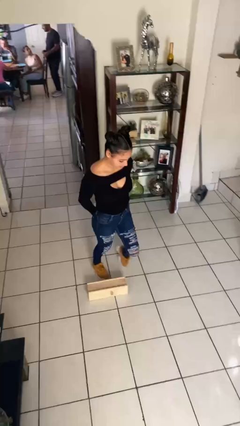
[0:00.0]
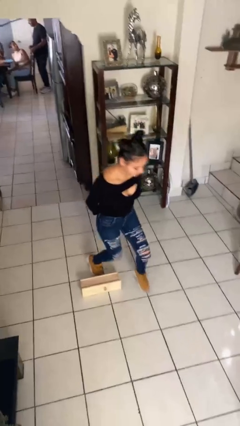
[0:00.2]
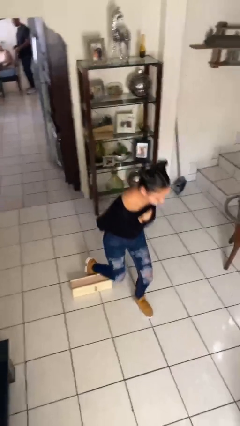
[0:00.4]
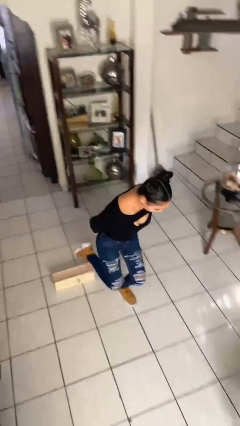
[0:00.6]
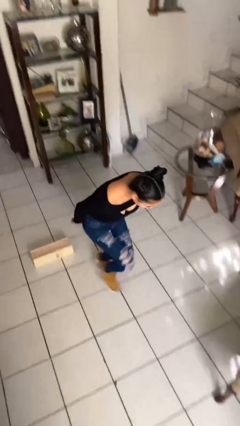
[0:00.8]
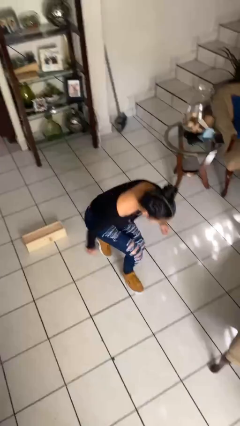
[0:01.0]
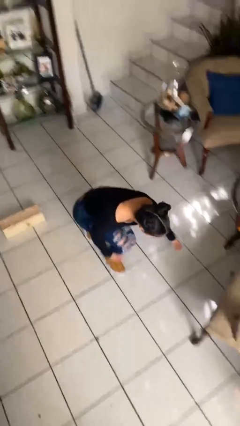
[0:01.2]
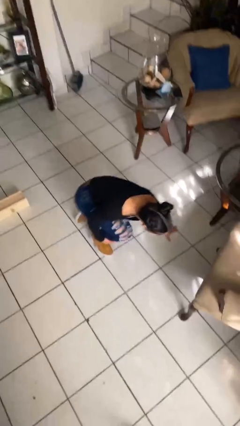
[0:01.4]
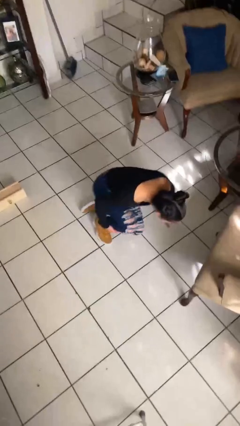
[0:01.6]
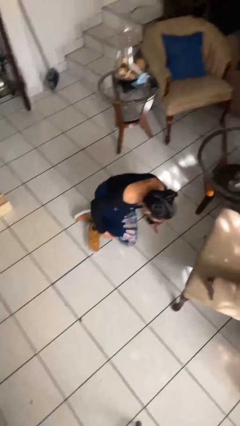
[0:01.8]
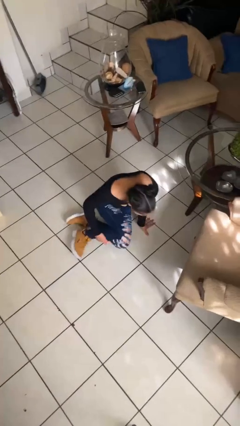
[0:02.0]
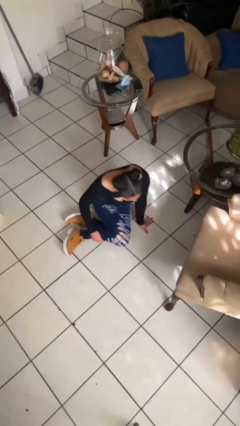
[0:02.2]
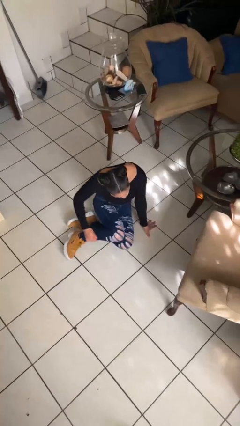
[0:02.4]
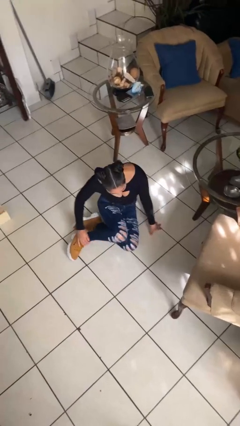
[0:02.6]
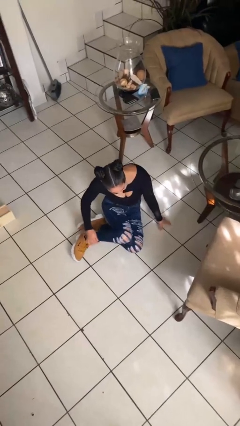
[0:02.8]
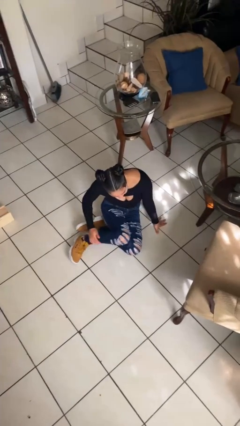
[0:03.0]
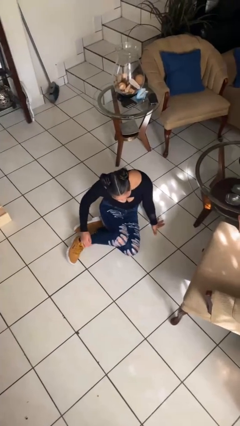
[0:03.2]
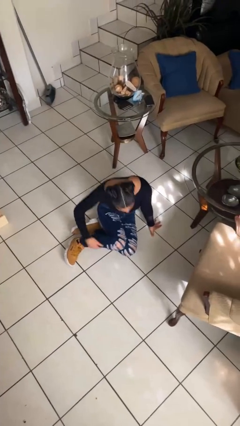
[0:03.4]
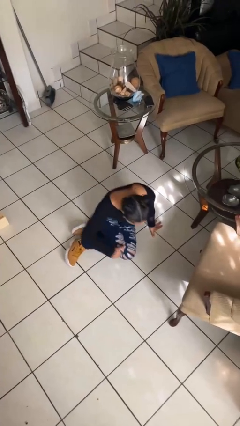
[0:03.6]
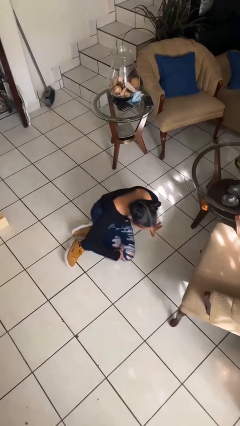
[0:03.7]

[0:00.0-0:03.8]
person lies down on floor

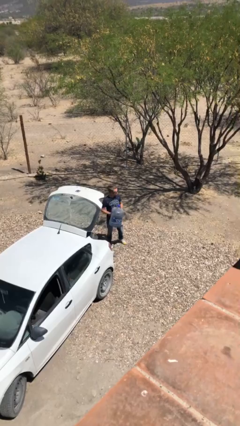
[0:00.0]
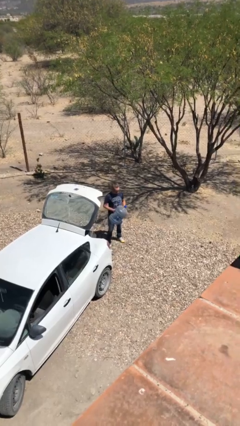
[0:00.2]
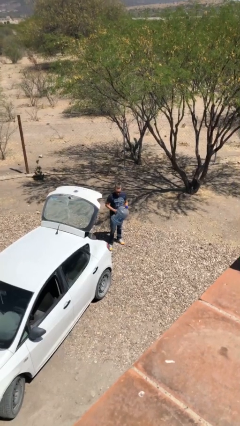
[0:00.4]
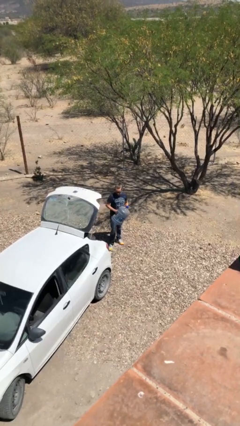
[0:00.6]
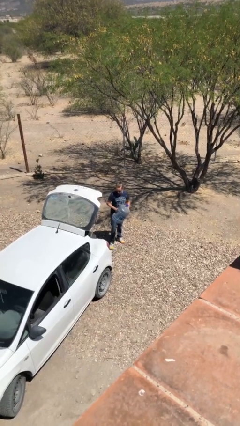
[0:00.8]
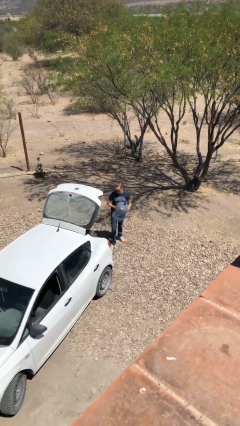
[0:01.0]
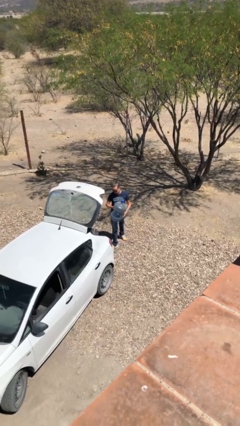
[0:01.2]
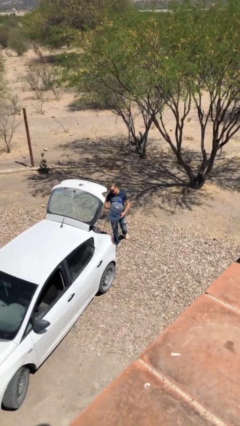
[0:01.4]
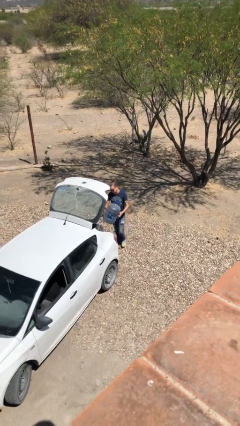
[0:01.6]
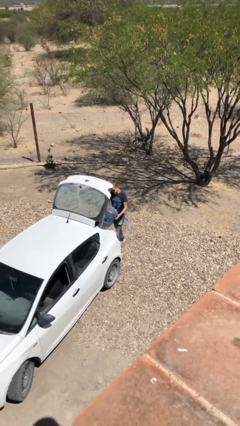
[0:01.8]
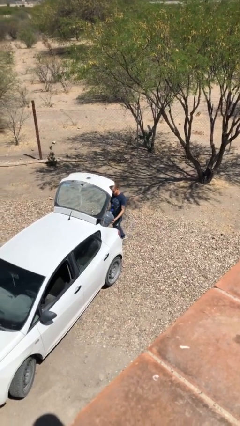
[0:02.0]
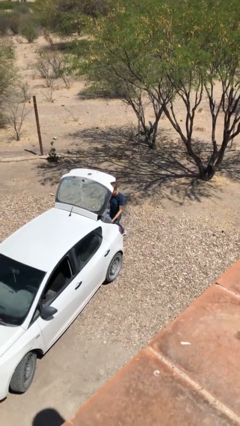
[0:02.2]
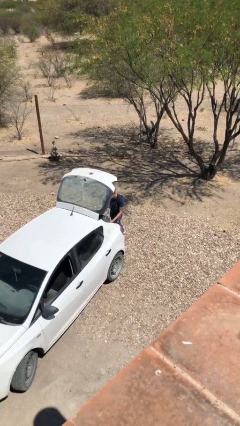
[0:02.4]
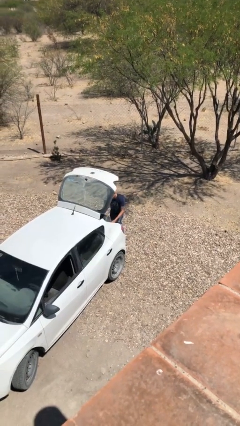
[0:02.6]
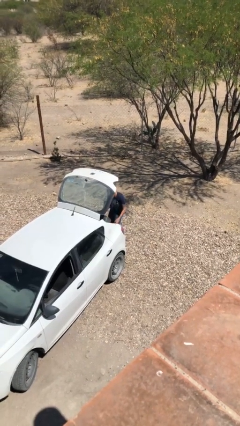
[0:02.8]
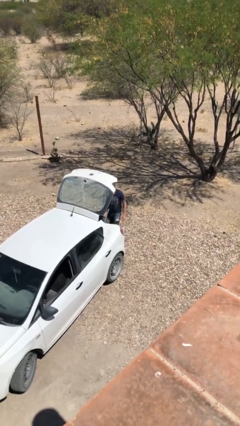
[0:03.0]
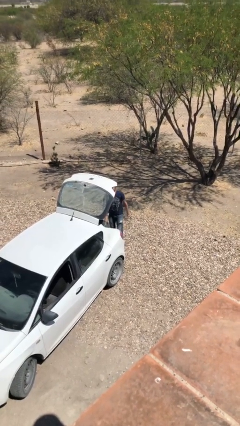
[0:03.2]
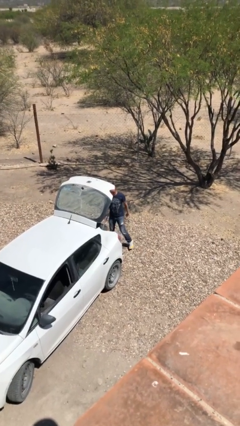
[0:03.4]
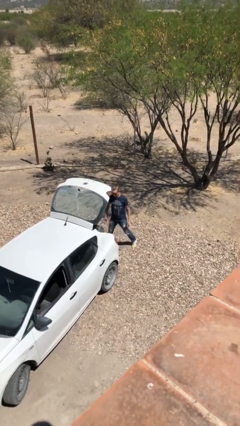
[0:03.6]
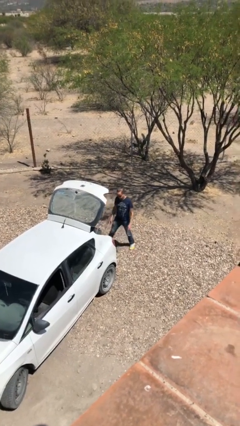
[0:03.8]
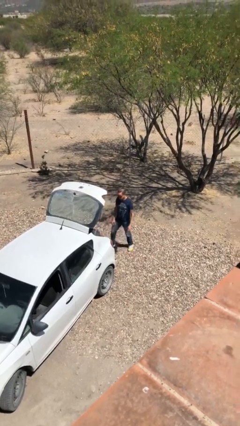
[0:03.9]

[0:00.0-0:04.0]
person loads car

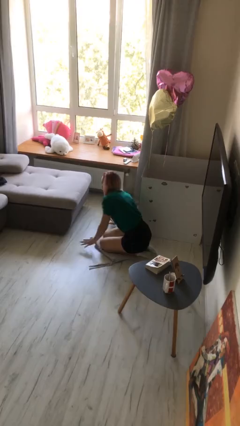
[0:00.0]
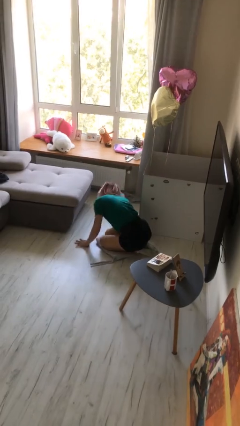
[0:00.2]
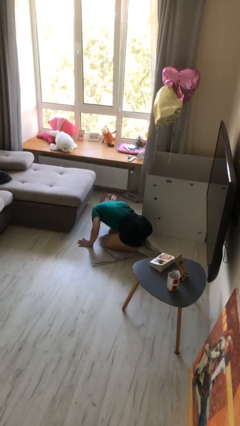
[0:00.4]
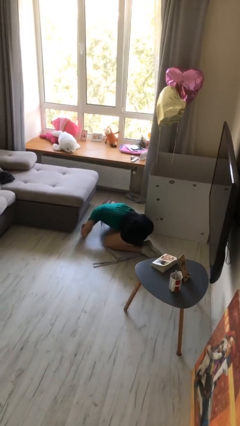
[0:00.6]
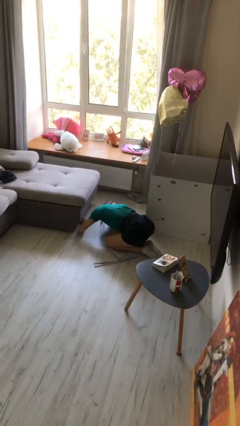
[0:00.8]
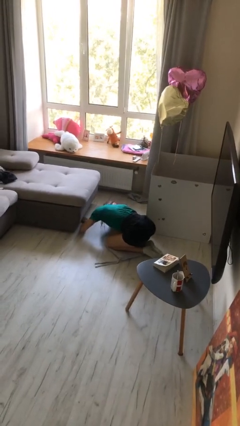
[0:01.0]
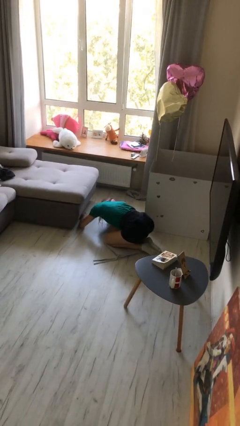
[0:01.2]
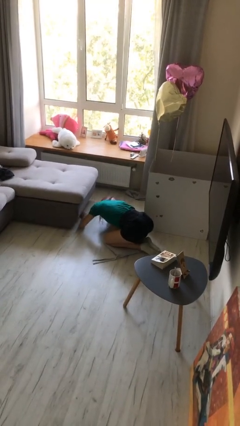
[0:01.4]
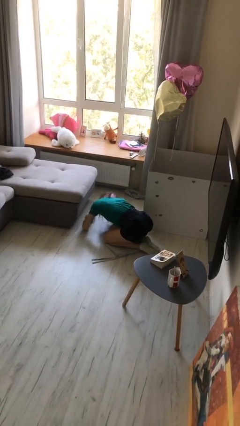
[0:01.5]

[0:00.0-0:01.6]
person searches under bed

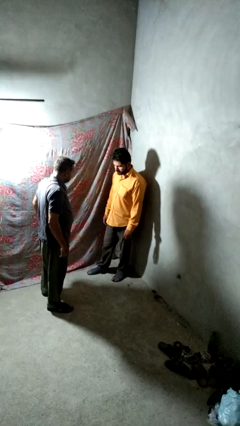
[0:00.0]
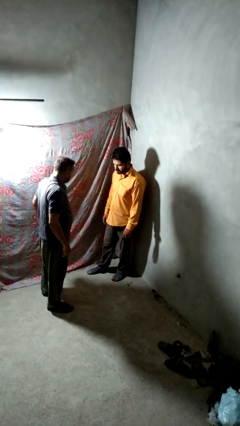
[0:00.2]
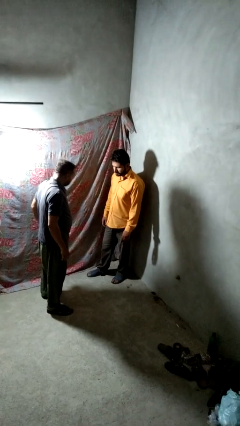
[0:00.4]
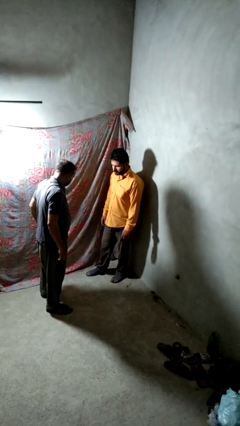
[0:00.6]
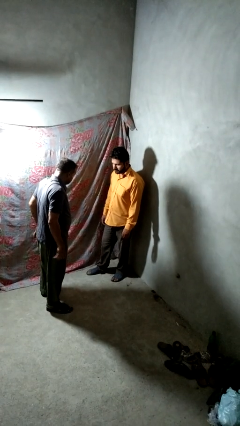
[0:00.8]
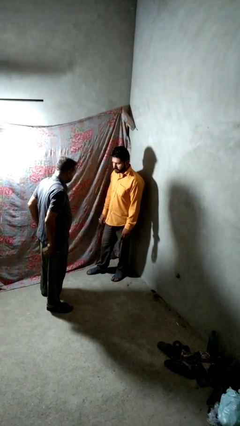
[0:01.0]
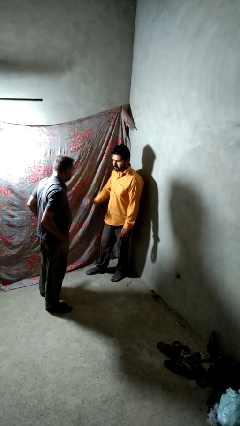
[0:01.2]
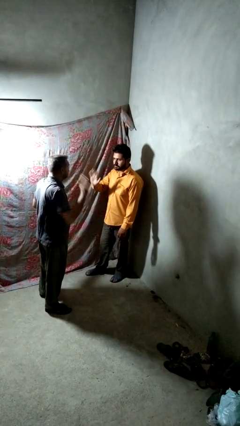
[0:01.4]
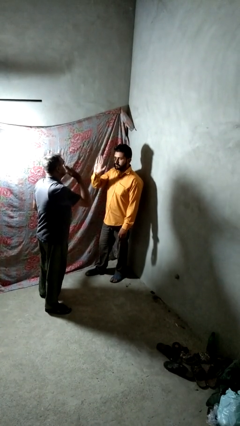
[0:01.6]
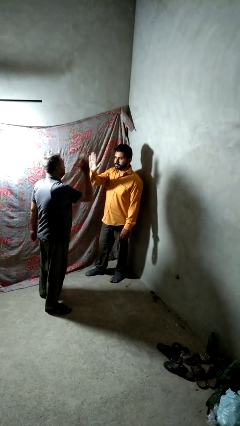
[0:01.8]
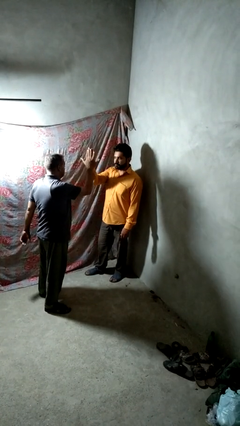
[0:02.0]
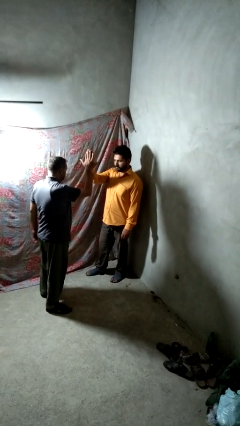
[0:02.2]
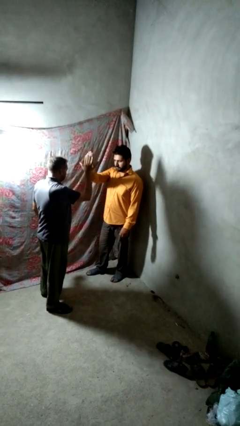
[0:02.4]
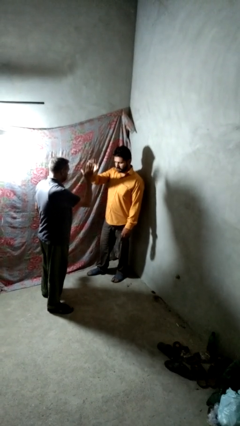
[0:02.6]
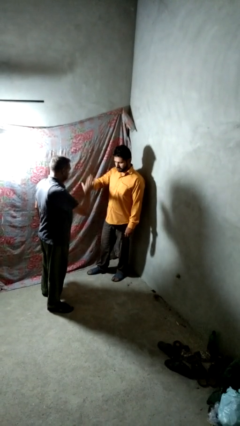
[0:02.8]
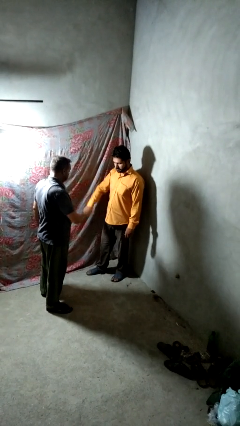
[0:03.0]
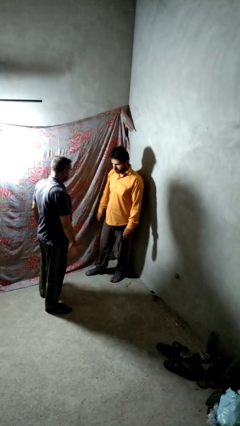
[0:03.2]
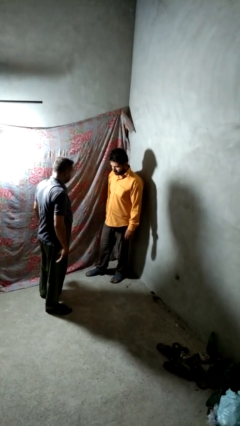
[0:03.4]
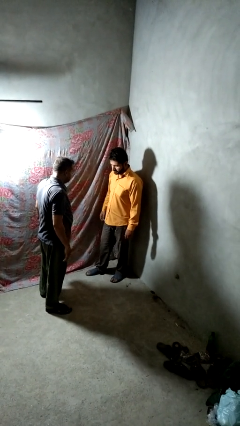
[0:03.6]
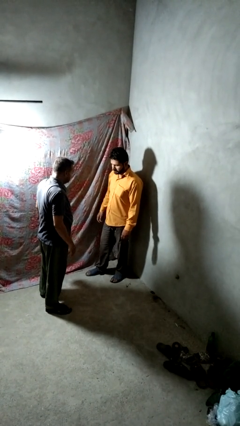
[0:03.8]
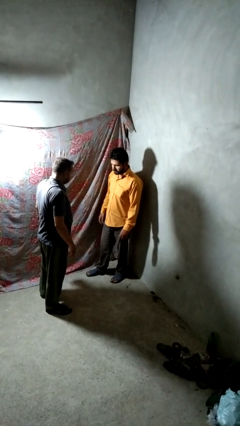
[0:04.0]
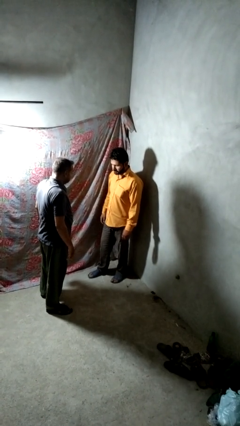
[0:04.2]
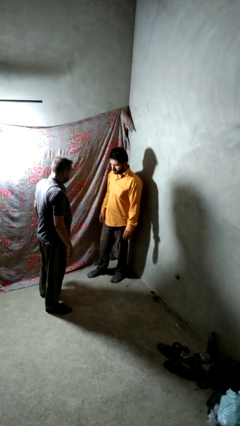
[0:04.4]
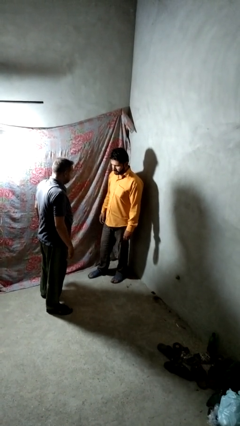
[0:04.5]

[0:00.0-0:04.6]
person highfives hand

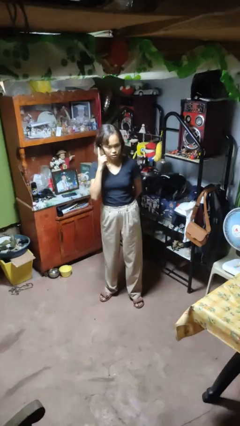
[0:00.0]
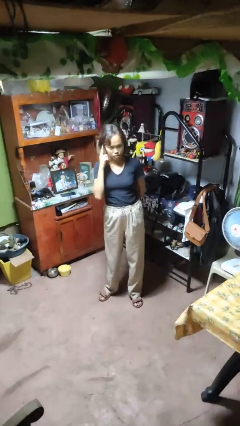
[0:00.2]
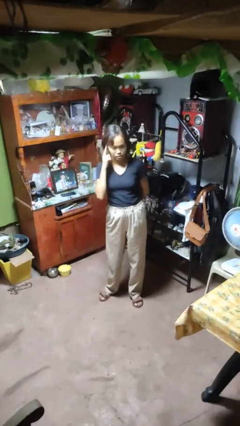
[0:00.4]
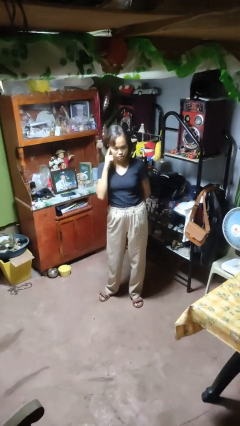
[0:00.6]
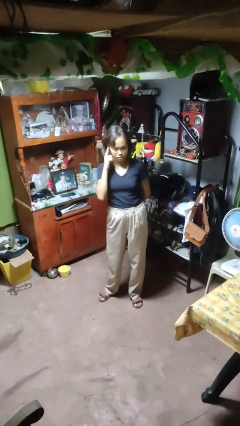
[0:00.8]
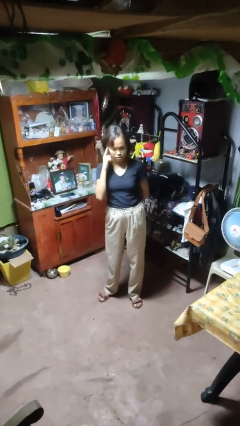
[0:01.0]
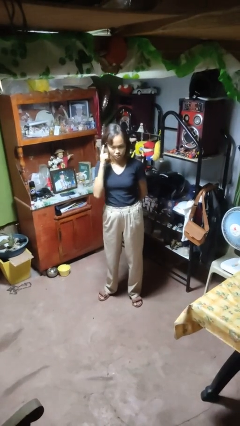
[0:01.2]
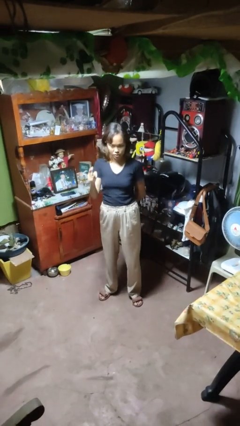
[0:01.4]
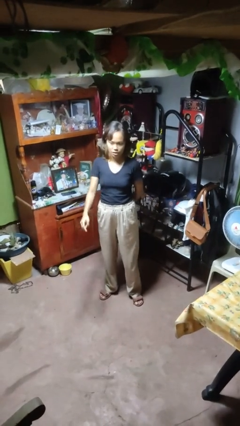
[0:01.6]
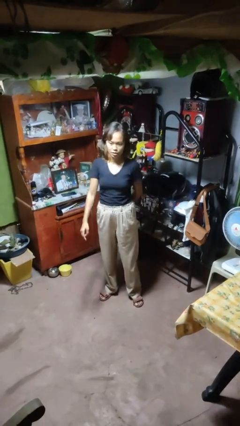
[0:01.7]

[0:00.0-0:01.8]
person gestures listen closely

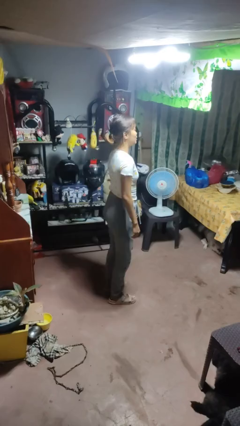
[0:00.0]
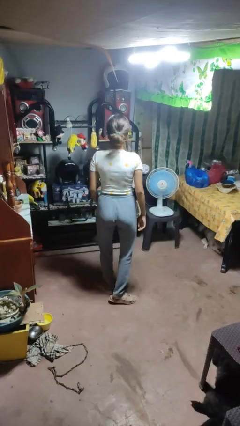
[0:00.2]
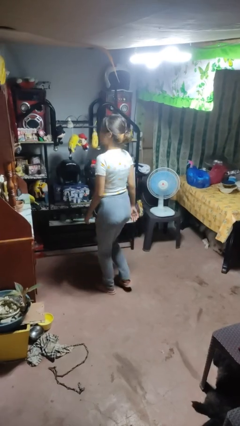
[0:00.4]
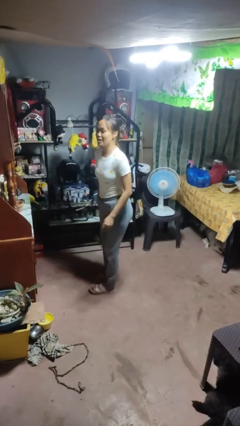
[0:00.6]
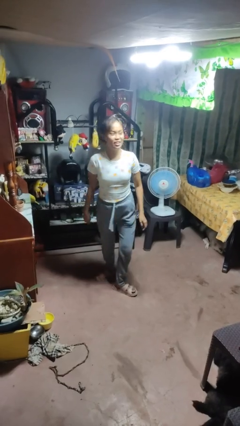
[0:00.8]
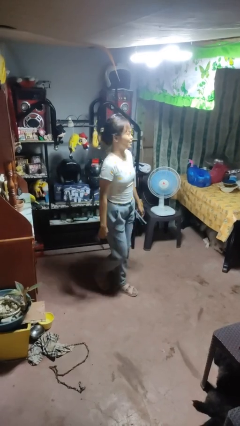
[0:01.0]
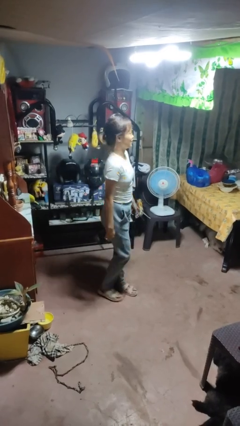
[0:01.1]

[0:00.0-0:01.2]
person twirls

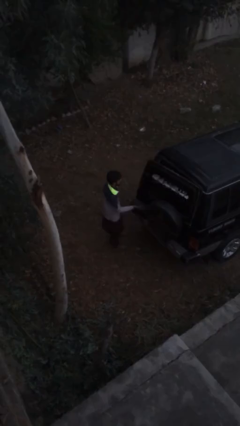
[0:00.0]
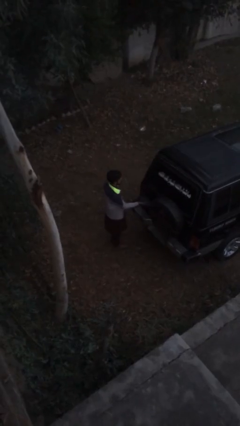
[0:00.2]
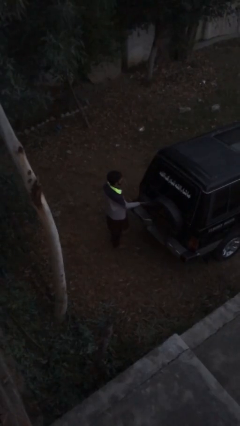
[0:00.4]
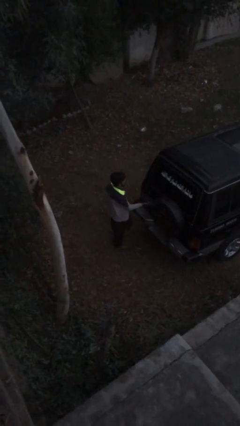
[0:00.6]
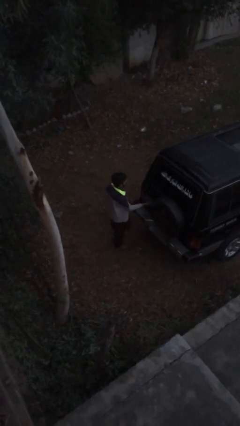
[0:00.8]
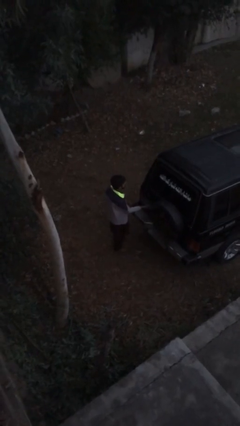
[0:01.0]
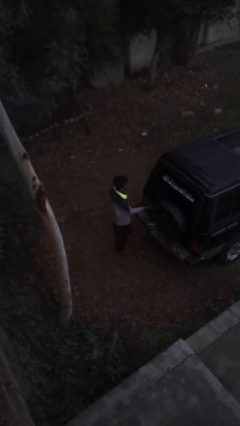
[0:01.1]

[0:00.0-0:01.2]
person closes car trunk
